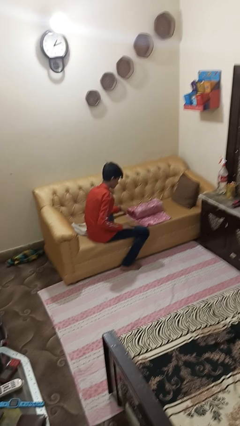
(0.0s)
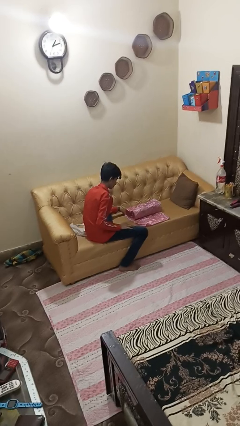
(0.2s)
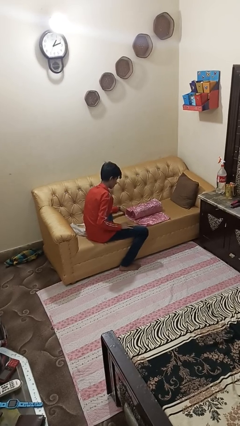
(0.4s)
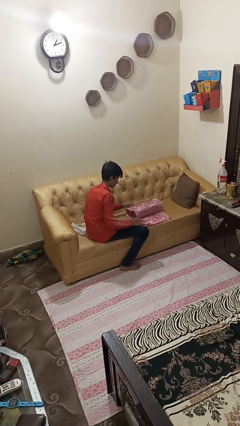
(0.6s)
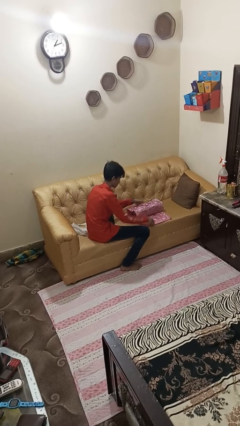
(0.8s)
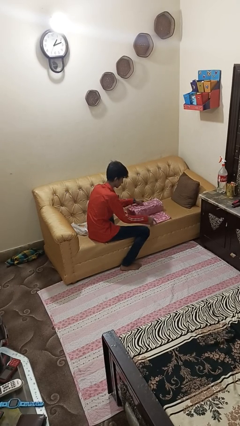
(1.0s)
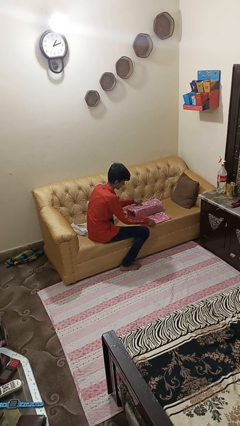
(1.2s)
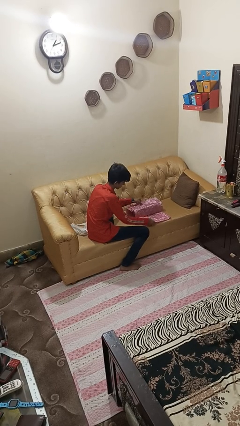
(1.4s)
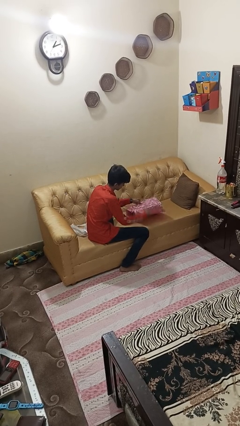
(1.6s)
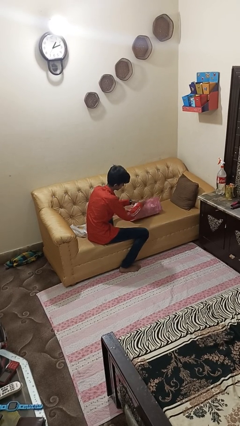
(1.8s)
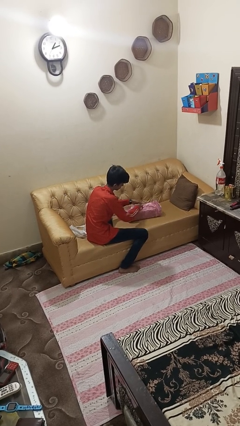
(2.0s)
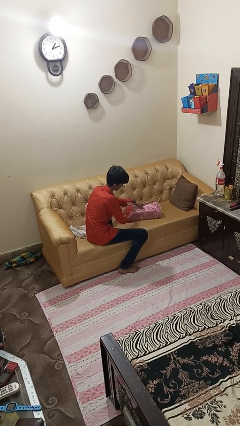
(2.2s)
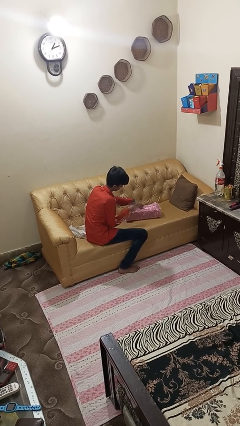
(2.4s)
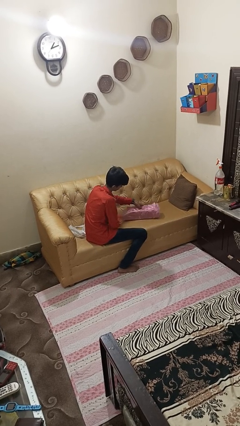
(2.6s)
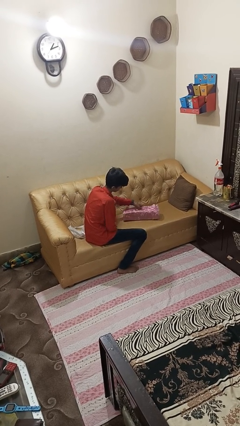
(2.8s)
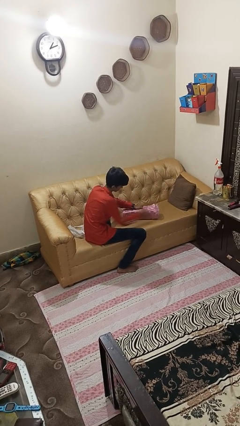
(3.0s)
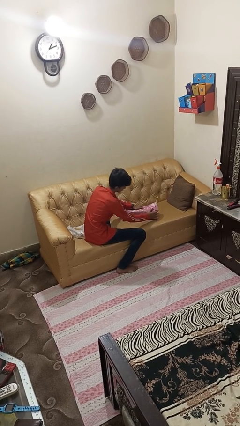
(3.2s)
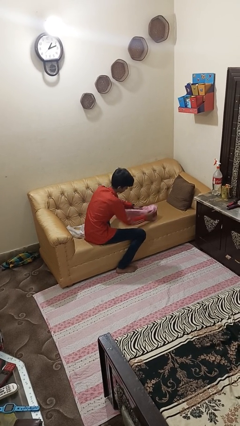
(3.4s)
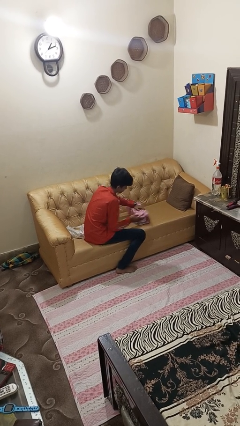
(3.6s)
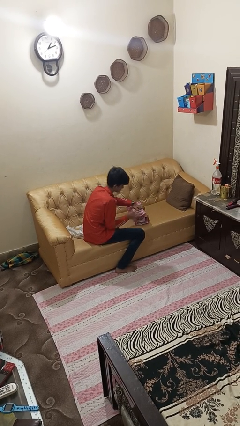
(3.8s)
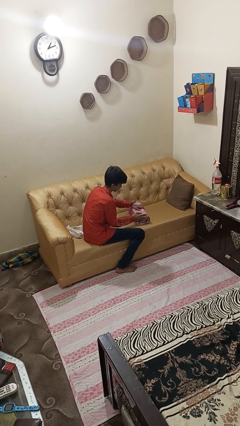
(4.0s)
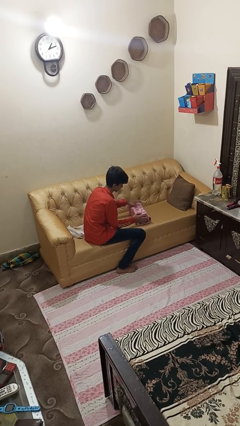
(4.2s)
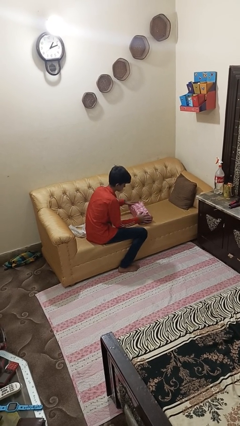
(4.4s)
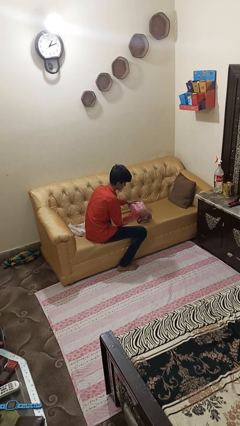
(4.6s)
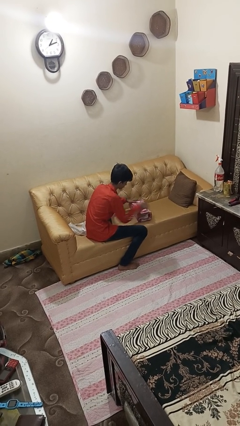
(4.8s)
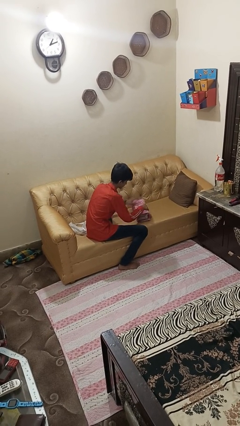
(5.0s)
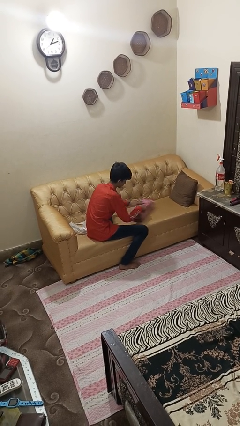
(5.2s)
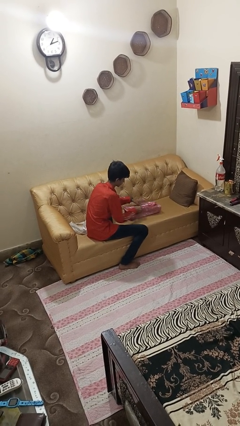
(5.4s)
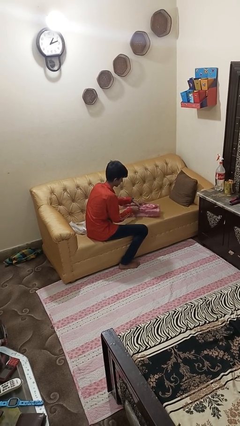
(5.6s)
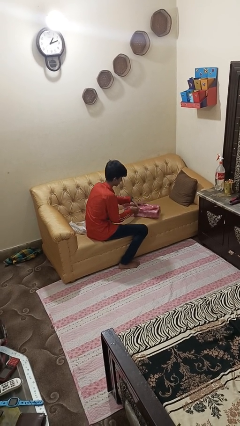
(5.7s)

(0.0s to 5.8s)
person wraps box

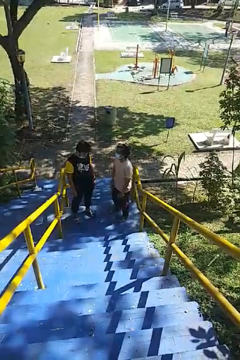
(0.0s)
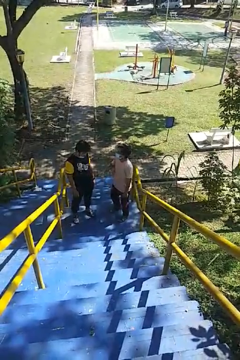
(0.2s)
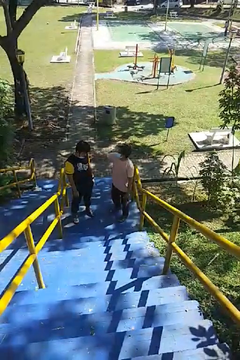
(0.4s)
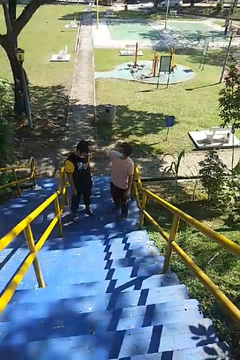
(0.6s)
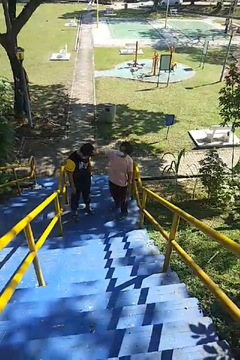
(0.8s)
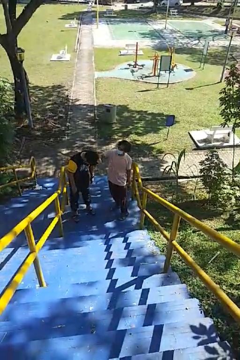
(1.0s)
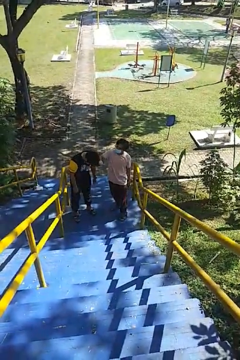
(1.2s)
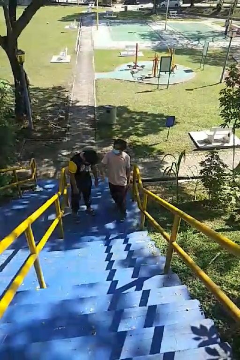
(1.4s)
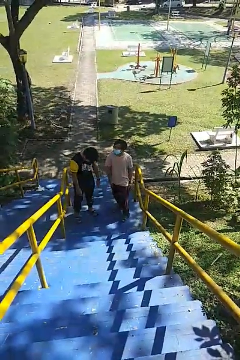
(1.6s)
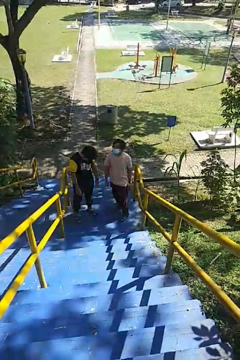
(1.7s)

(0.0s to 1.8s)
person grabs person by hair

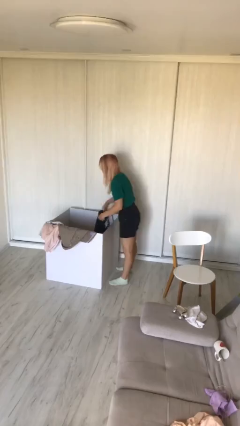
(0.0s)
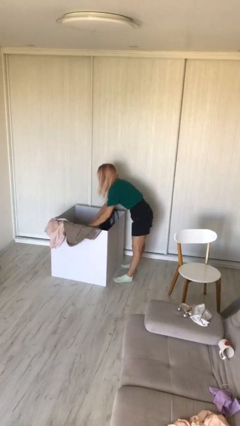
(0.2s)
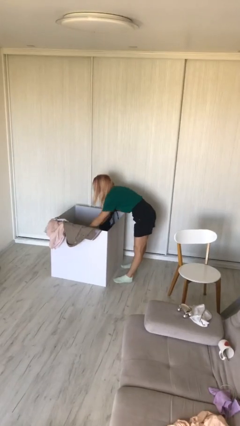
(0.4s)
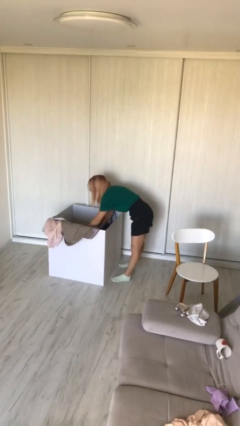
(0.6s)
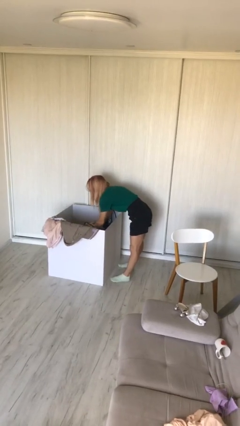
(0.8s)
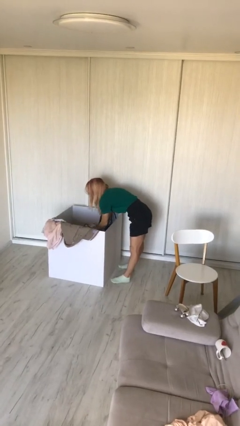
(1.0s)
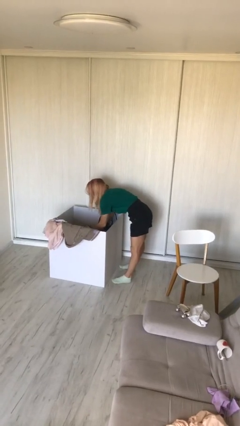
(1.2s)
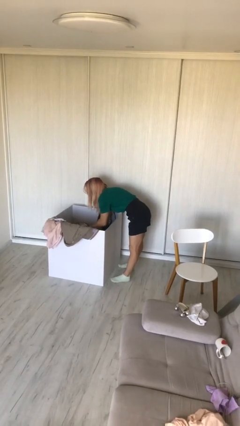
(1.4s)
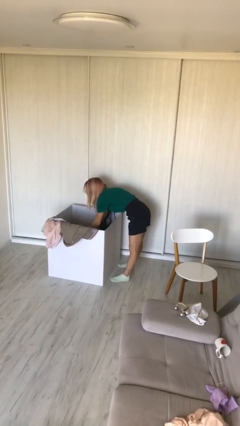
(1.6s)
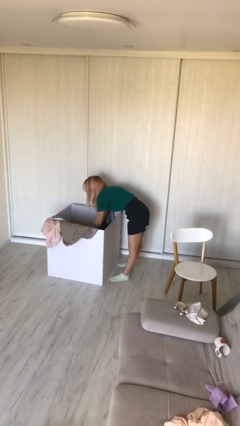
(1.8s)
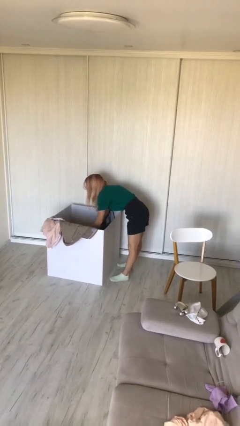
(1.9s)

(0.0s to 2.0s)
person searches in box

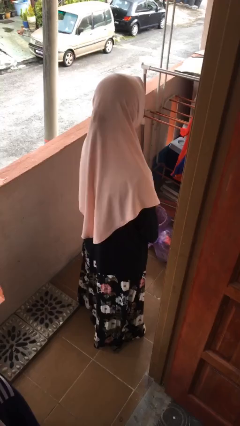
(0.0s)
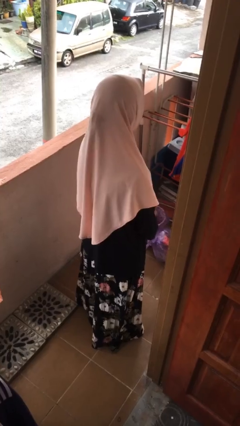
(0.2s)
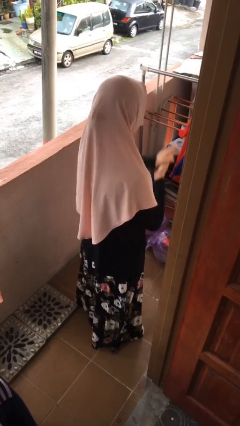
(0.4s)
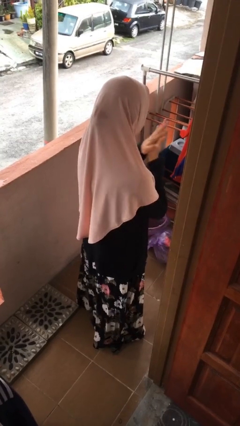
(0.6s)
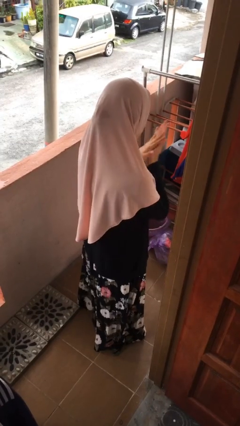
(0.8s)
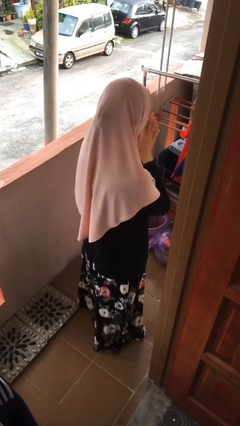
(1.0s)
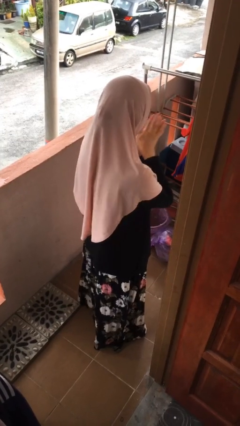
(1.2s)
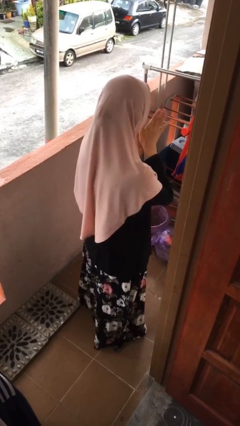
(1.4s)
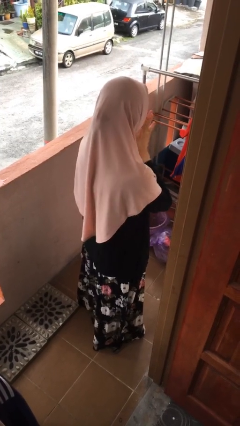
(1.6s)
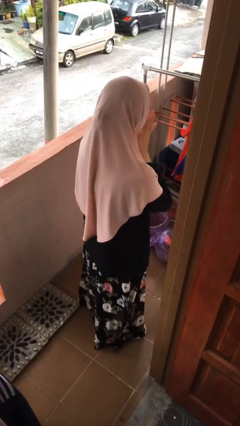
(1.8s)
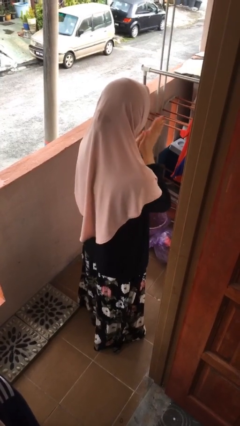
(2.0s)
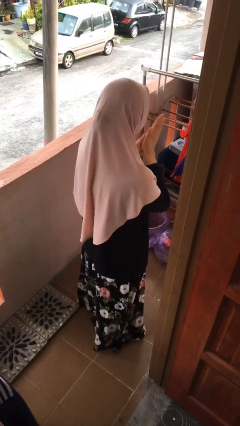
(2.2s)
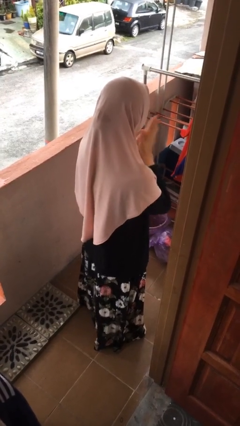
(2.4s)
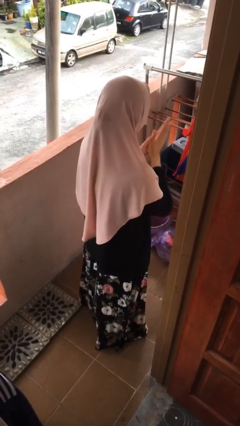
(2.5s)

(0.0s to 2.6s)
person blows into hands

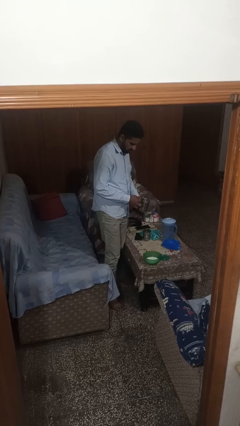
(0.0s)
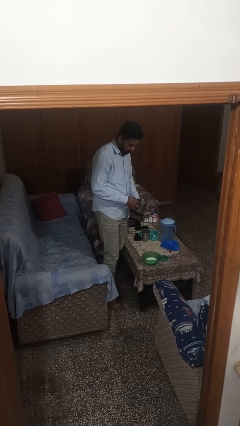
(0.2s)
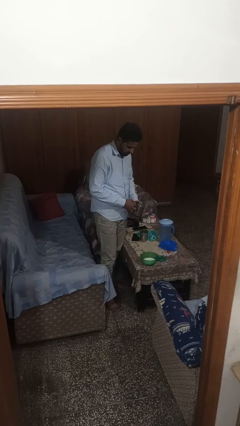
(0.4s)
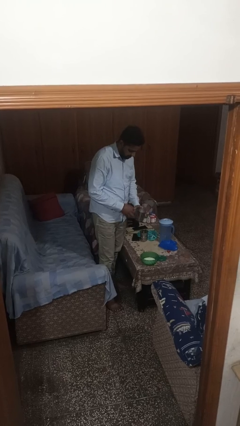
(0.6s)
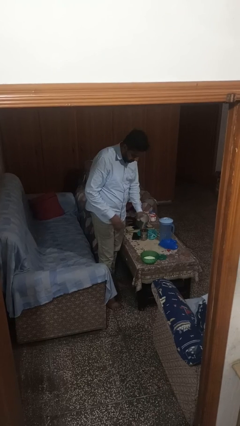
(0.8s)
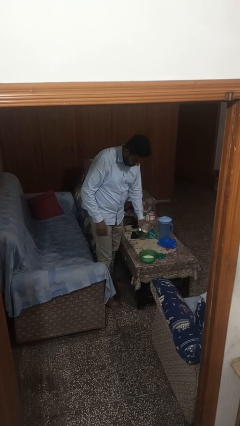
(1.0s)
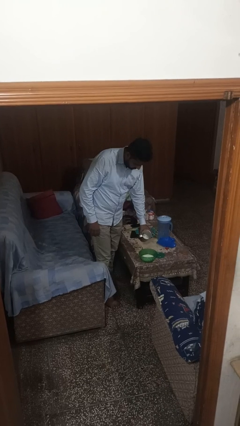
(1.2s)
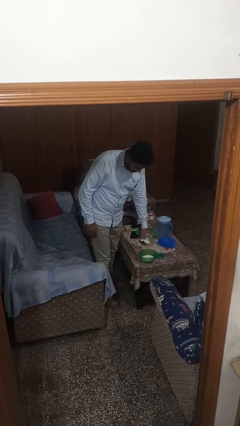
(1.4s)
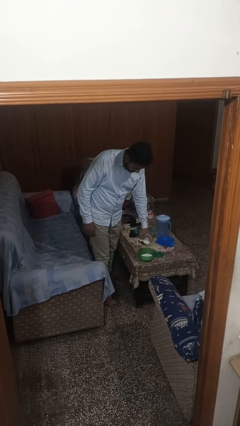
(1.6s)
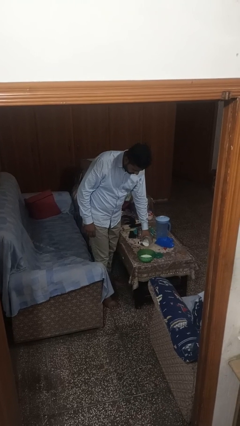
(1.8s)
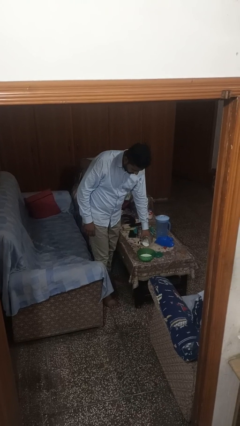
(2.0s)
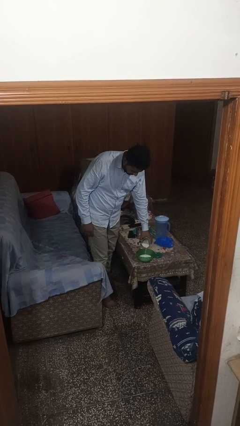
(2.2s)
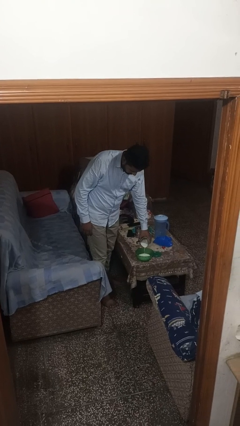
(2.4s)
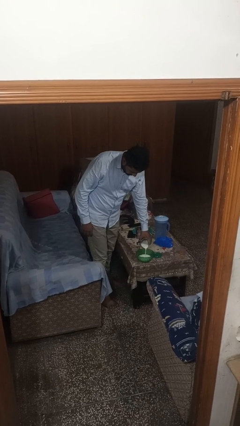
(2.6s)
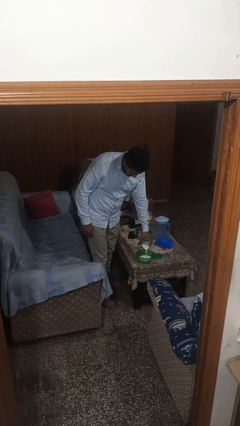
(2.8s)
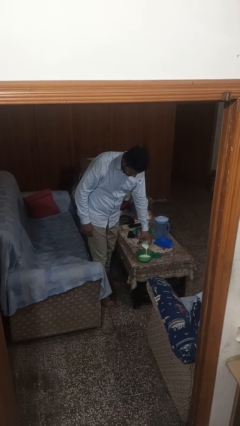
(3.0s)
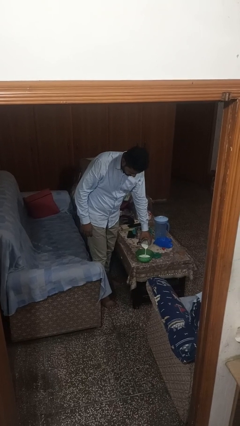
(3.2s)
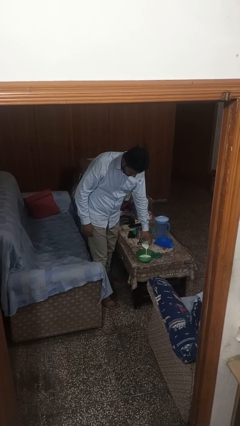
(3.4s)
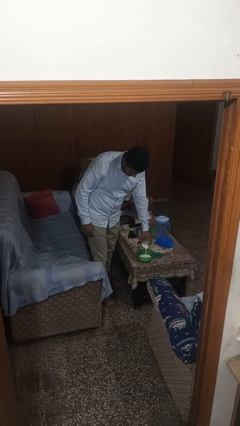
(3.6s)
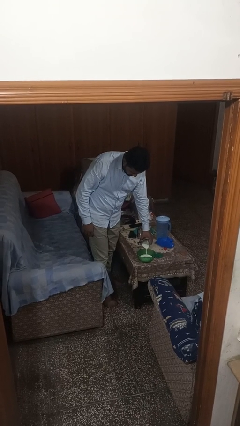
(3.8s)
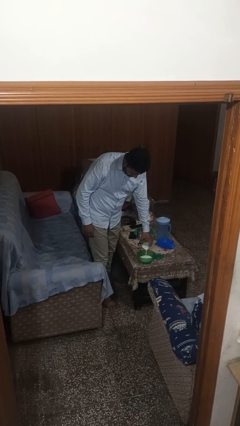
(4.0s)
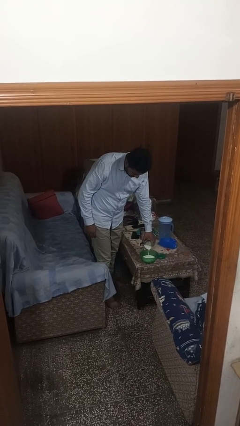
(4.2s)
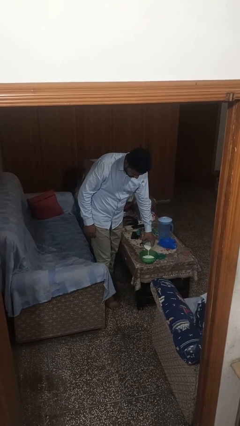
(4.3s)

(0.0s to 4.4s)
person pours into bowl

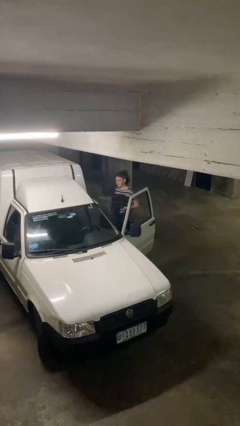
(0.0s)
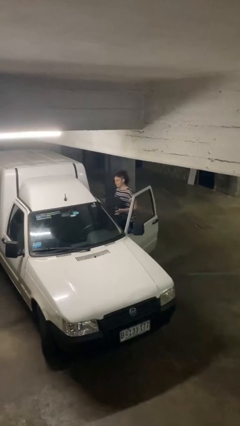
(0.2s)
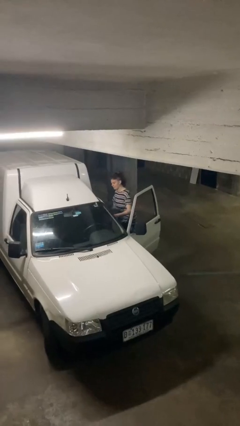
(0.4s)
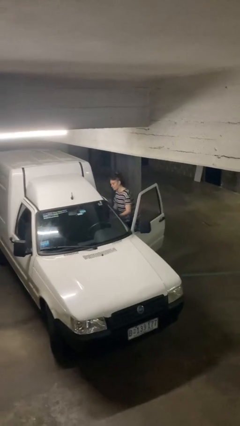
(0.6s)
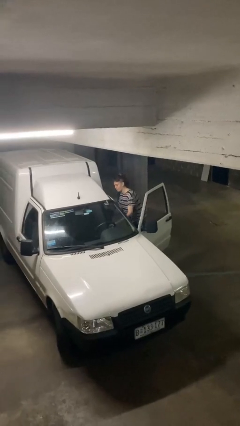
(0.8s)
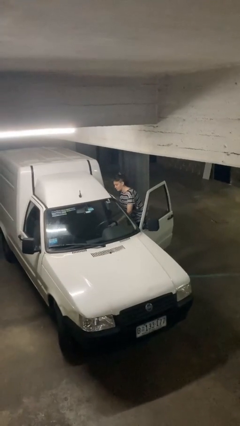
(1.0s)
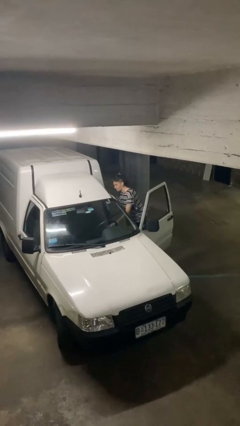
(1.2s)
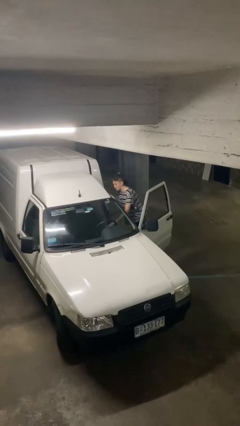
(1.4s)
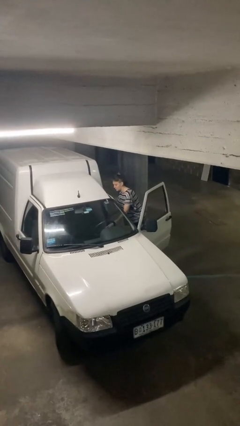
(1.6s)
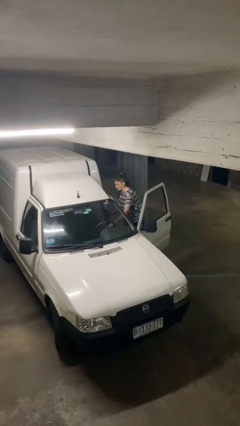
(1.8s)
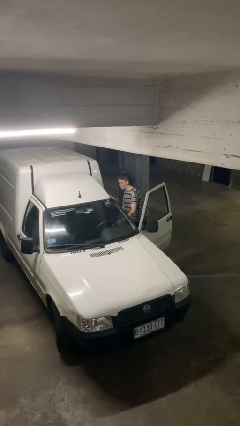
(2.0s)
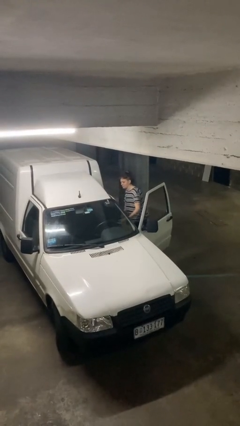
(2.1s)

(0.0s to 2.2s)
person loads car
